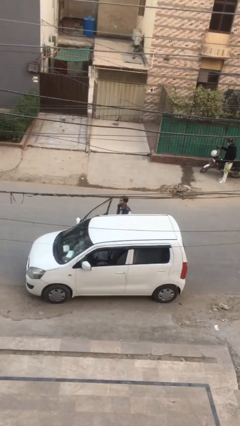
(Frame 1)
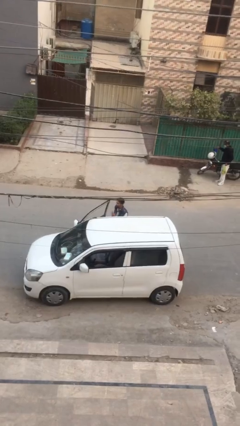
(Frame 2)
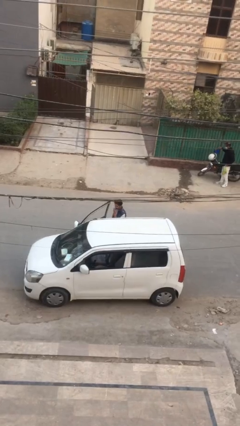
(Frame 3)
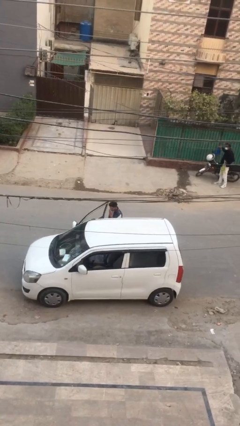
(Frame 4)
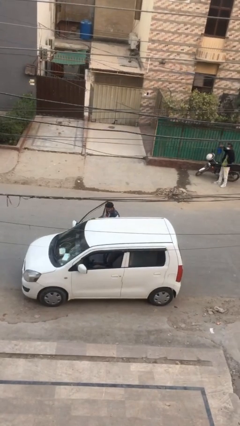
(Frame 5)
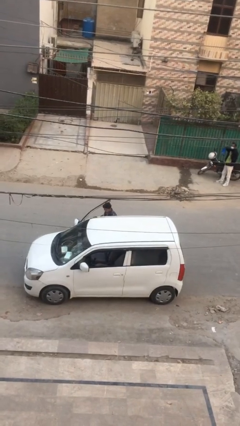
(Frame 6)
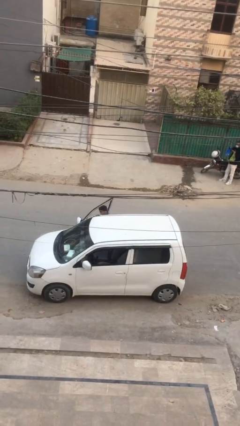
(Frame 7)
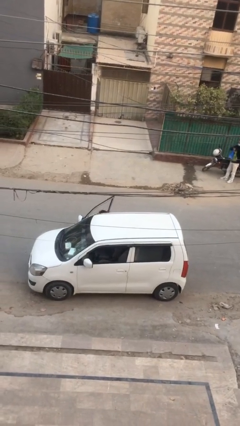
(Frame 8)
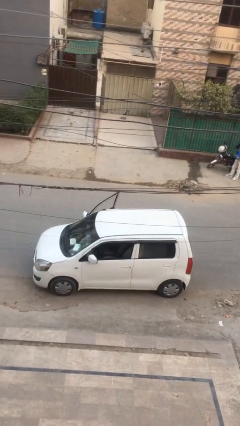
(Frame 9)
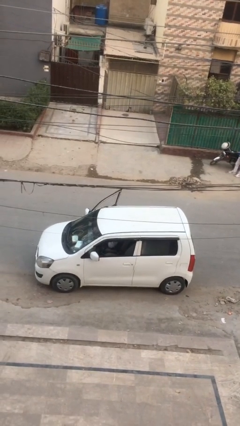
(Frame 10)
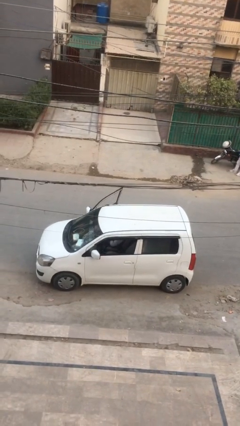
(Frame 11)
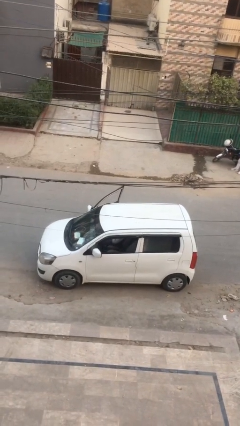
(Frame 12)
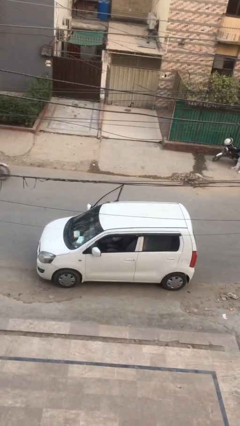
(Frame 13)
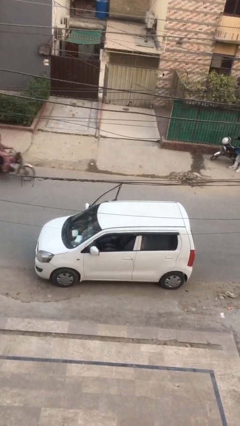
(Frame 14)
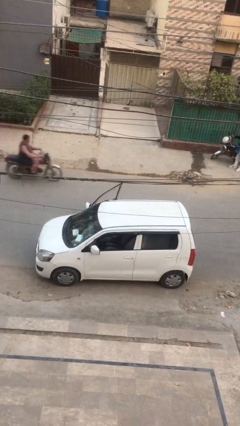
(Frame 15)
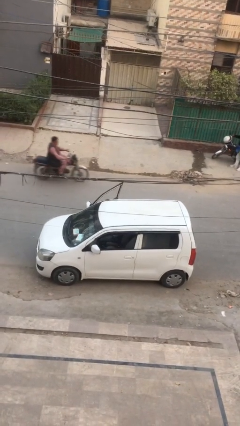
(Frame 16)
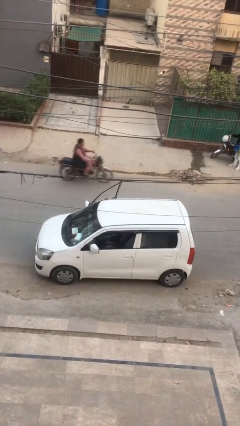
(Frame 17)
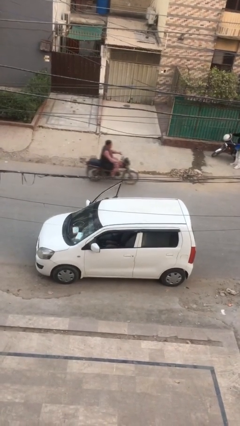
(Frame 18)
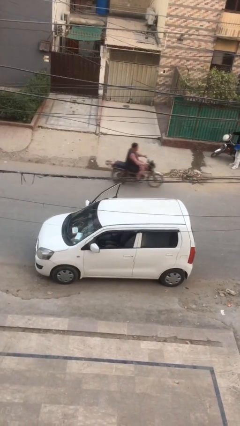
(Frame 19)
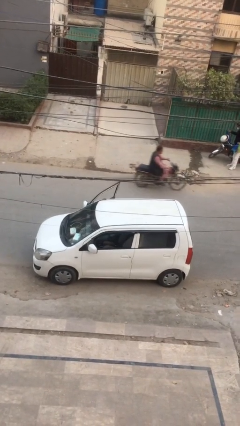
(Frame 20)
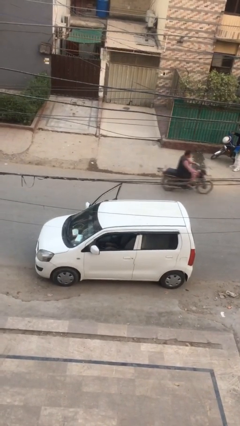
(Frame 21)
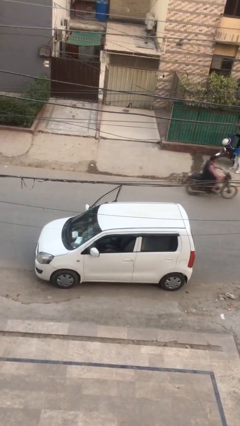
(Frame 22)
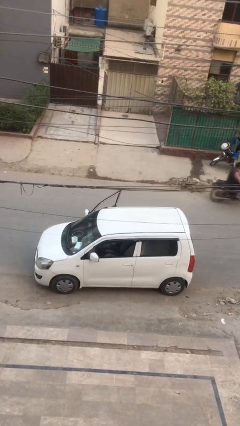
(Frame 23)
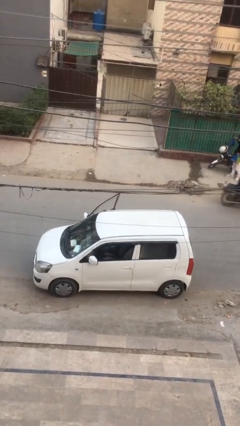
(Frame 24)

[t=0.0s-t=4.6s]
person enters car

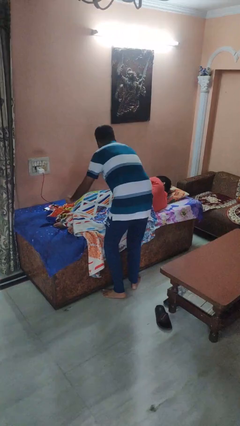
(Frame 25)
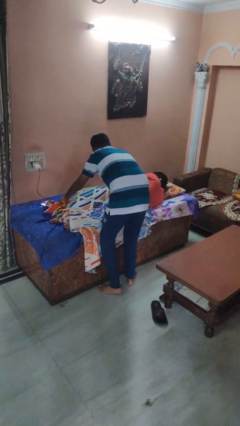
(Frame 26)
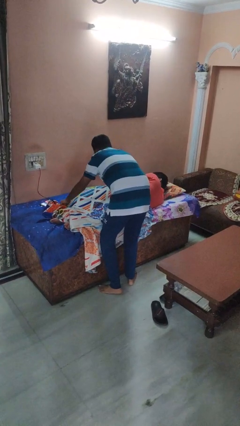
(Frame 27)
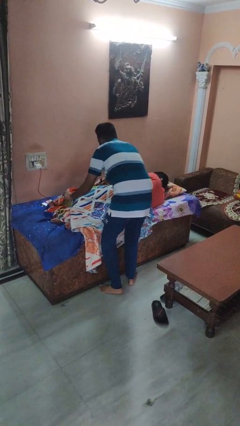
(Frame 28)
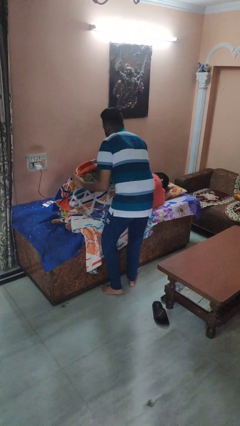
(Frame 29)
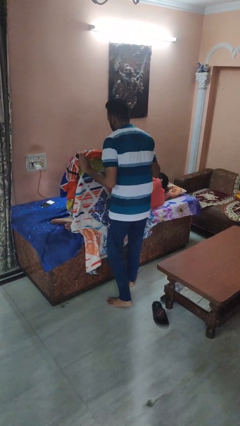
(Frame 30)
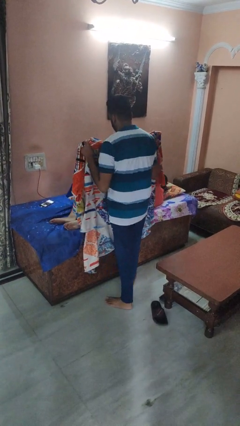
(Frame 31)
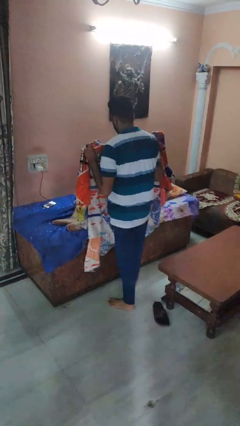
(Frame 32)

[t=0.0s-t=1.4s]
person uncovers friend with blanket

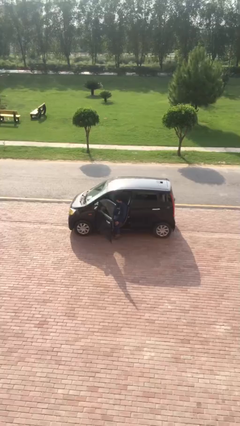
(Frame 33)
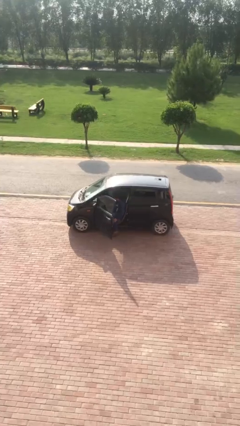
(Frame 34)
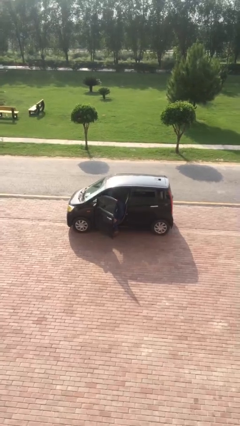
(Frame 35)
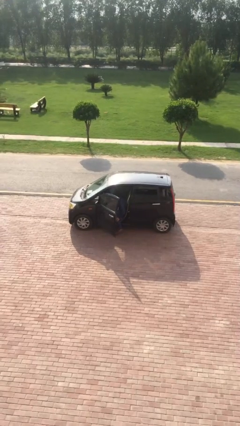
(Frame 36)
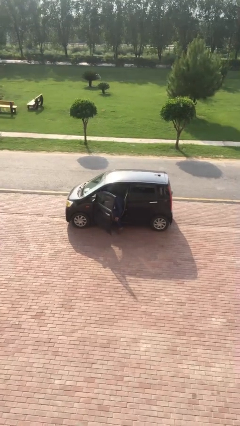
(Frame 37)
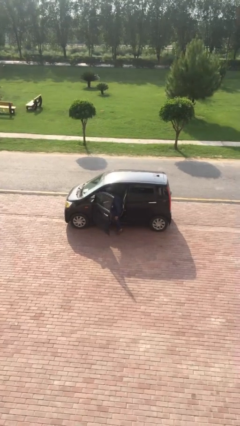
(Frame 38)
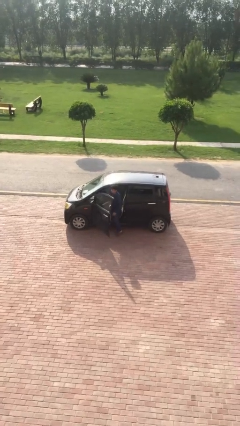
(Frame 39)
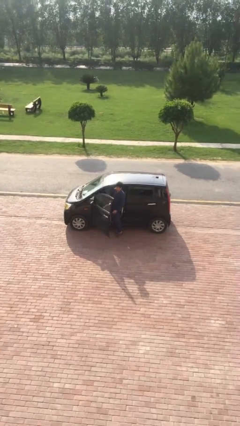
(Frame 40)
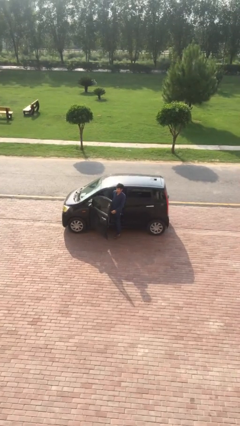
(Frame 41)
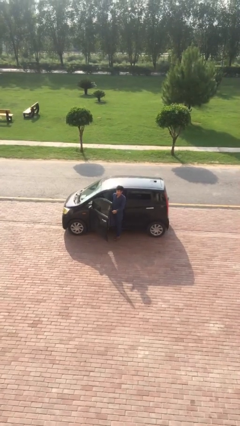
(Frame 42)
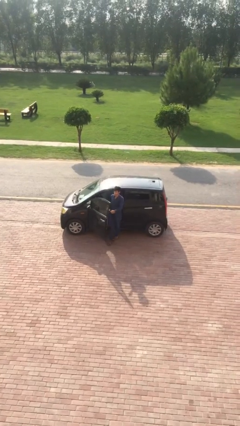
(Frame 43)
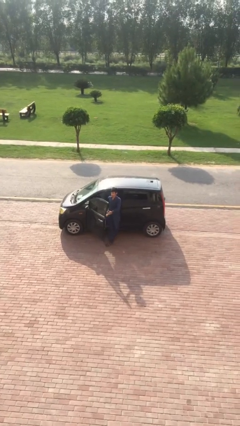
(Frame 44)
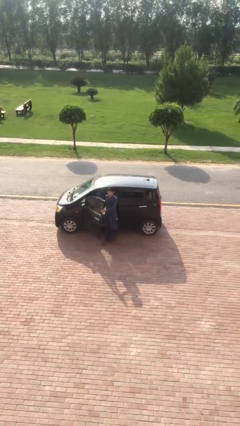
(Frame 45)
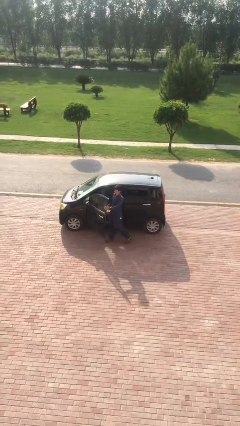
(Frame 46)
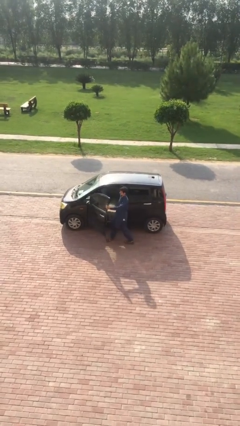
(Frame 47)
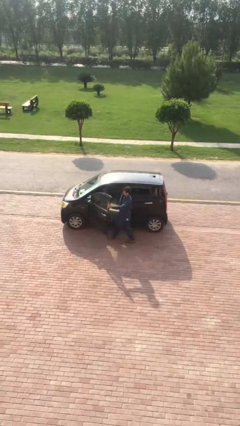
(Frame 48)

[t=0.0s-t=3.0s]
person exits car

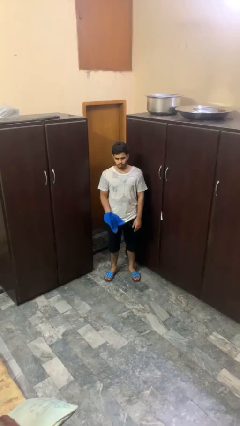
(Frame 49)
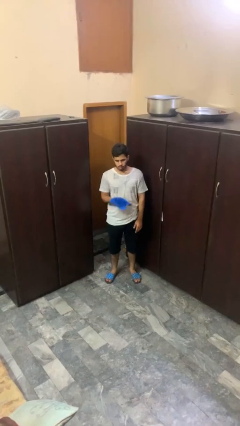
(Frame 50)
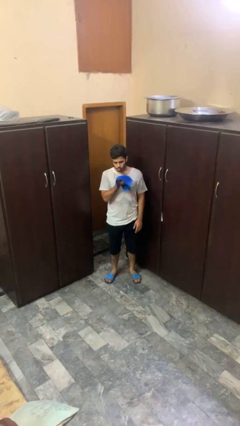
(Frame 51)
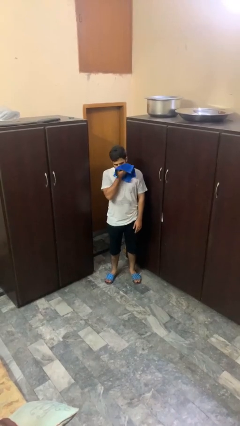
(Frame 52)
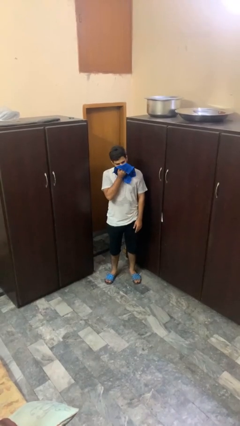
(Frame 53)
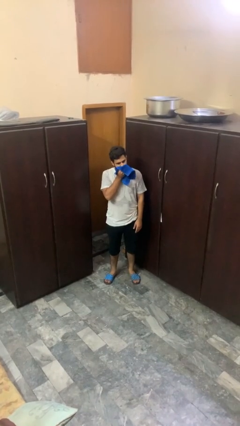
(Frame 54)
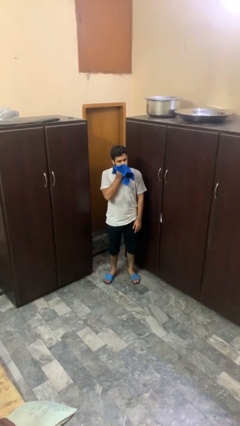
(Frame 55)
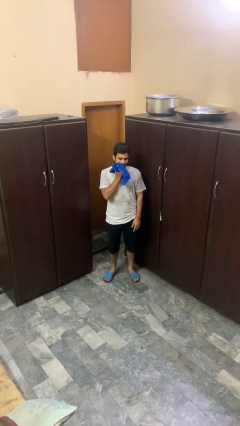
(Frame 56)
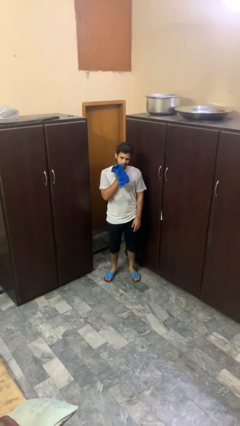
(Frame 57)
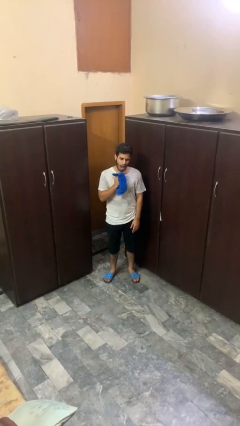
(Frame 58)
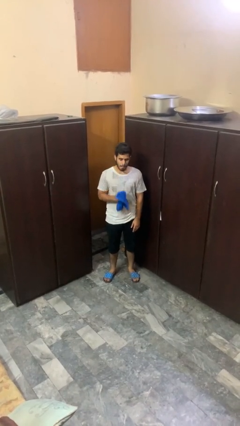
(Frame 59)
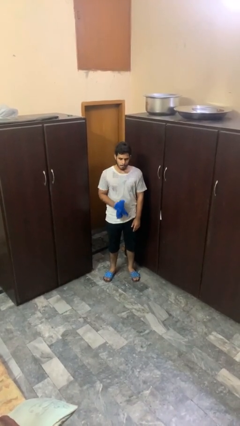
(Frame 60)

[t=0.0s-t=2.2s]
person wipes mouth with napkin

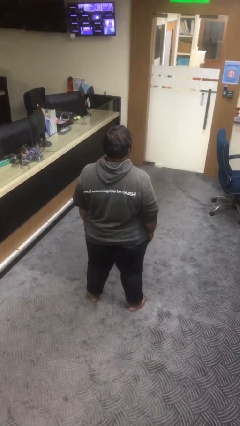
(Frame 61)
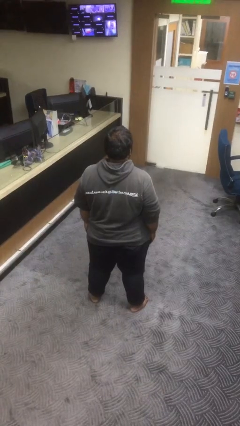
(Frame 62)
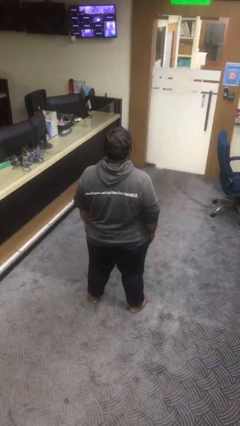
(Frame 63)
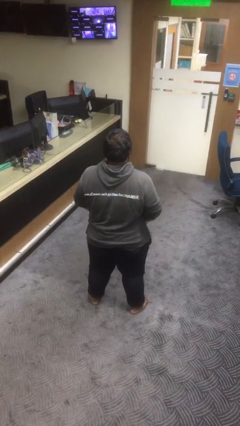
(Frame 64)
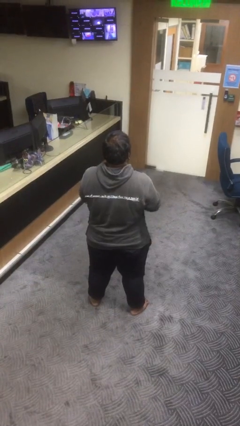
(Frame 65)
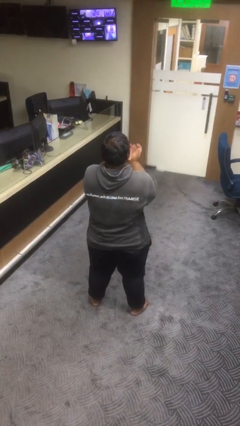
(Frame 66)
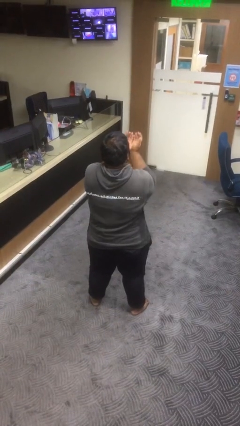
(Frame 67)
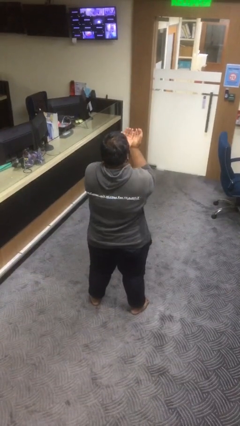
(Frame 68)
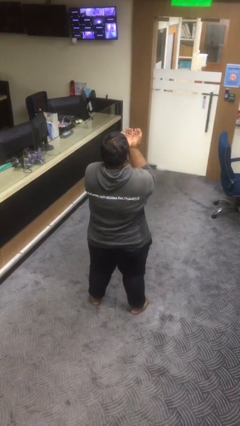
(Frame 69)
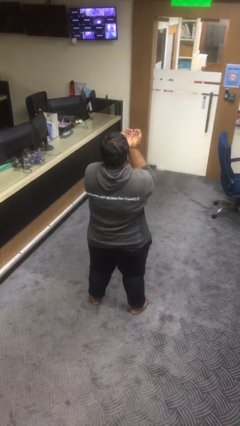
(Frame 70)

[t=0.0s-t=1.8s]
person prays

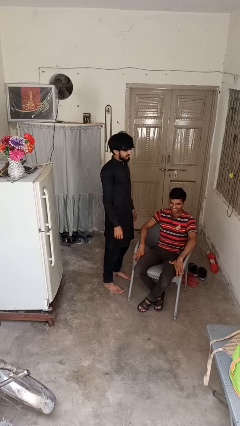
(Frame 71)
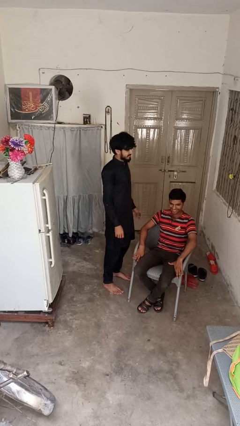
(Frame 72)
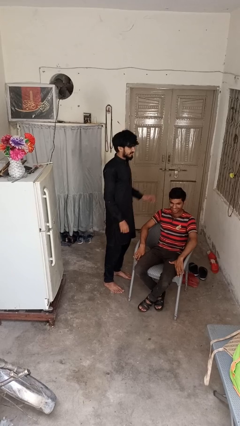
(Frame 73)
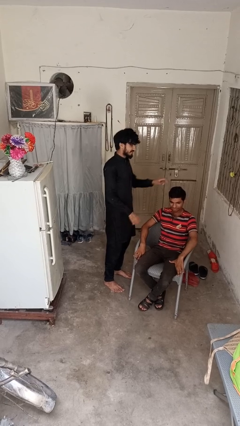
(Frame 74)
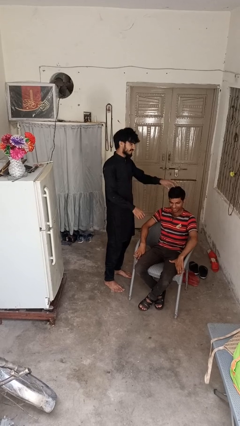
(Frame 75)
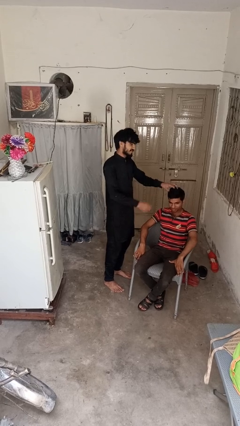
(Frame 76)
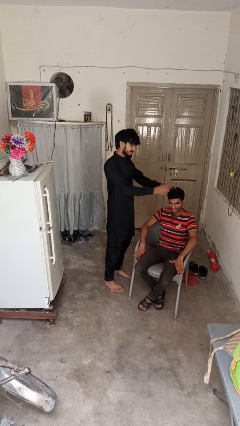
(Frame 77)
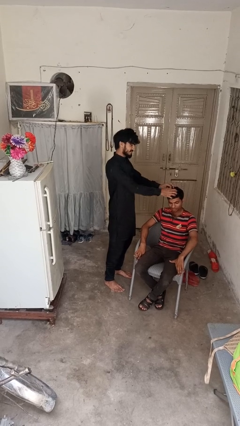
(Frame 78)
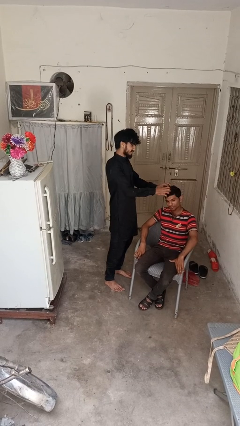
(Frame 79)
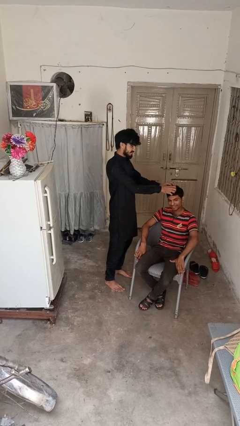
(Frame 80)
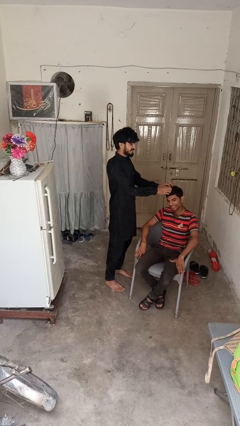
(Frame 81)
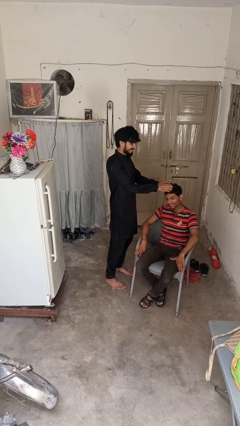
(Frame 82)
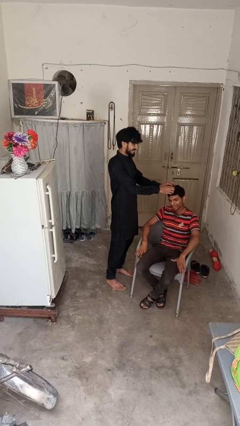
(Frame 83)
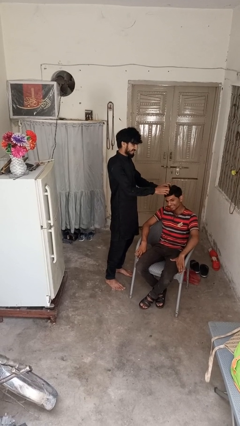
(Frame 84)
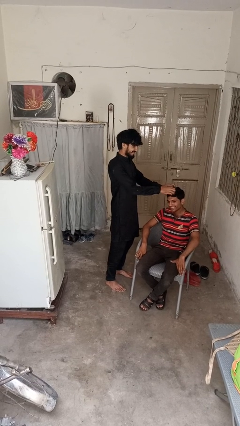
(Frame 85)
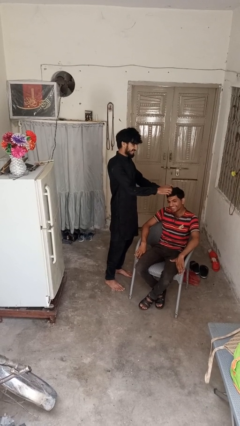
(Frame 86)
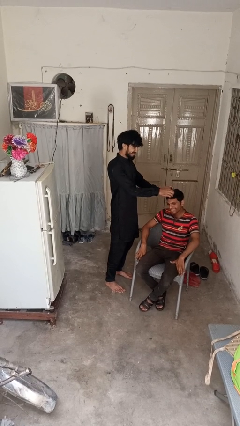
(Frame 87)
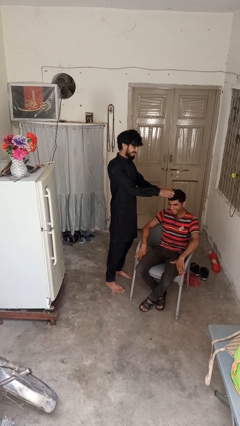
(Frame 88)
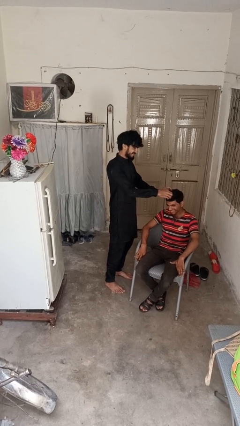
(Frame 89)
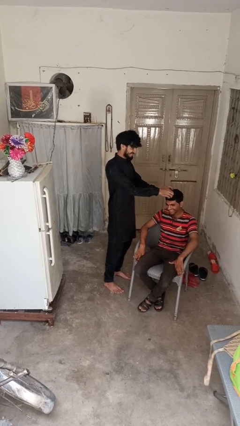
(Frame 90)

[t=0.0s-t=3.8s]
person grabs person by hair
